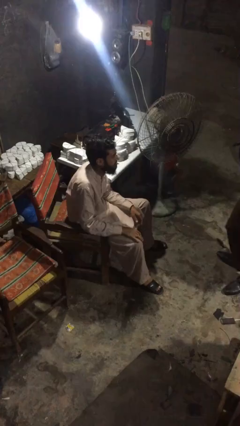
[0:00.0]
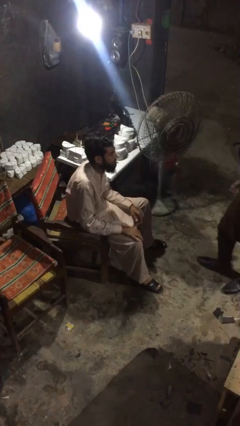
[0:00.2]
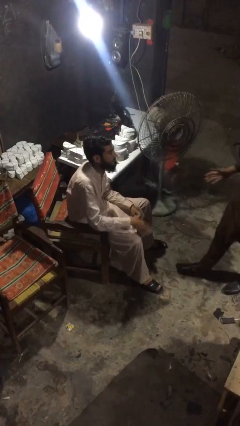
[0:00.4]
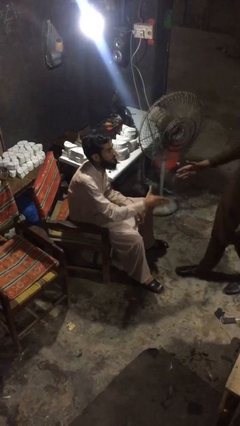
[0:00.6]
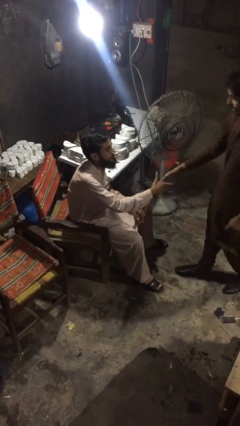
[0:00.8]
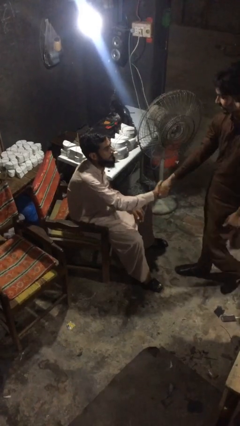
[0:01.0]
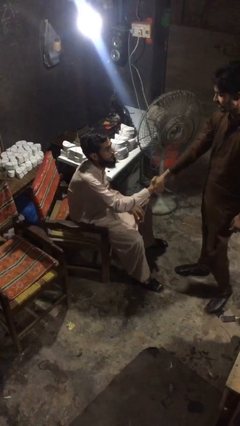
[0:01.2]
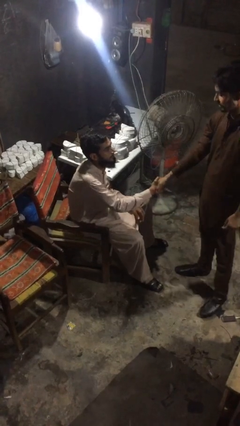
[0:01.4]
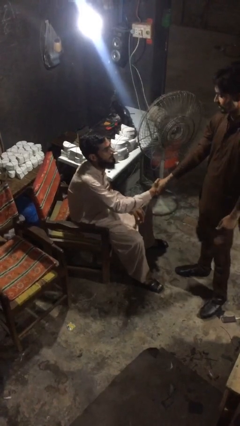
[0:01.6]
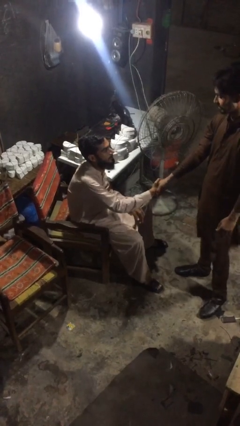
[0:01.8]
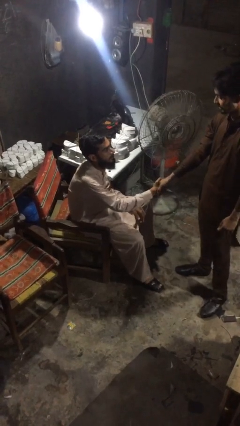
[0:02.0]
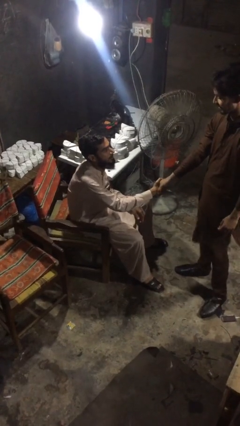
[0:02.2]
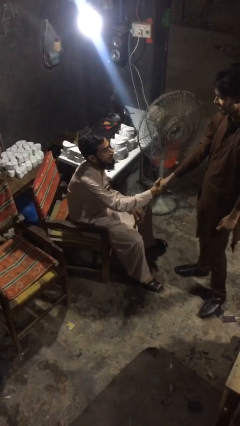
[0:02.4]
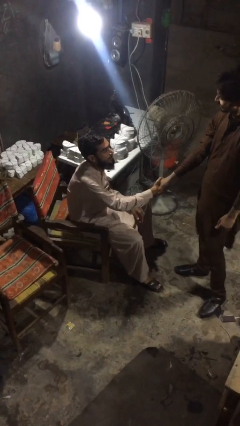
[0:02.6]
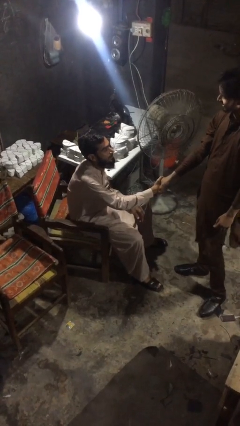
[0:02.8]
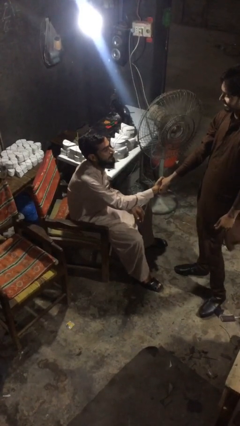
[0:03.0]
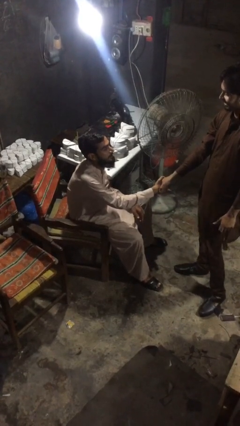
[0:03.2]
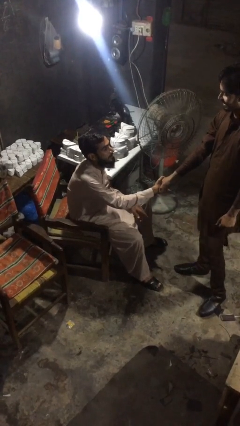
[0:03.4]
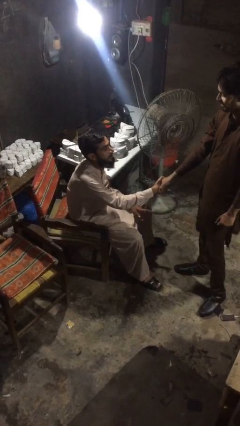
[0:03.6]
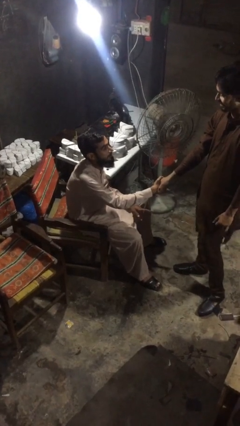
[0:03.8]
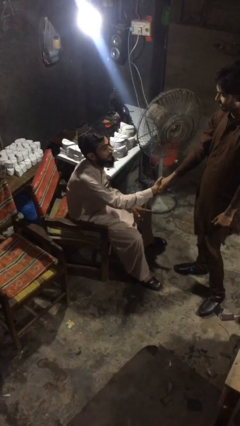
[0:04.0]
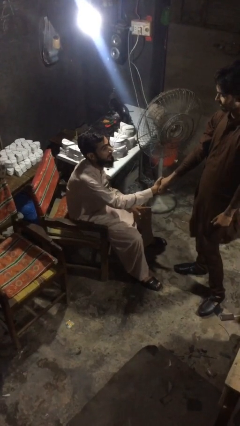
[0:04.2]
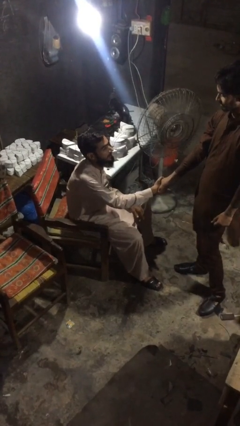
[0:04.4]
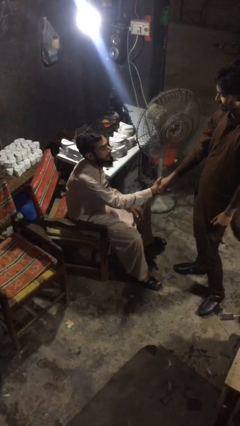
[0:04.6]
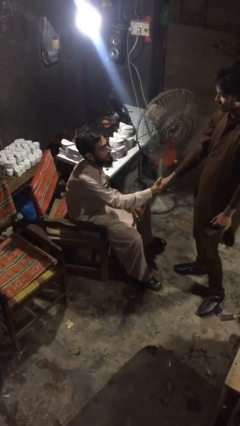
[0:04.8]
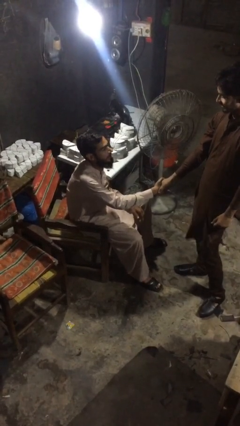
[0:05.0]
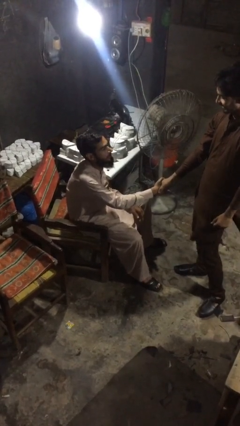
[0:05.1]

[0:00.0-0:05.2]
person shakes hand

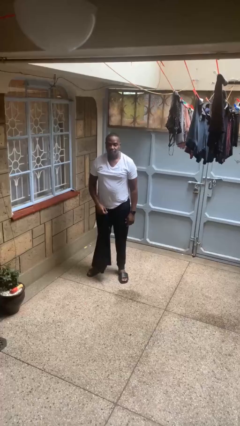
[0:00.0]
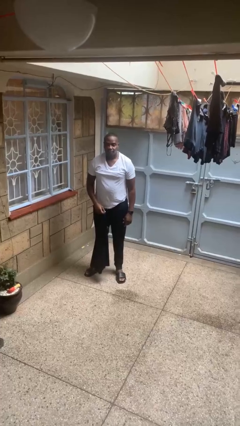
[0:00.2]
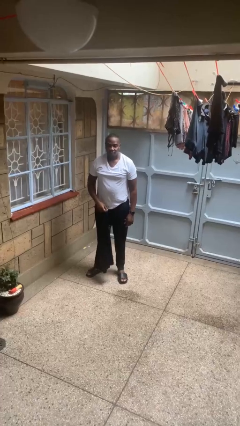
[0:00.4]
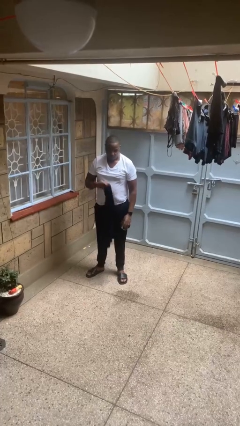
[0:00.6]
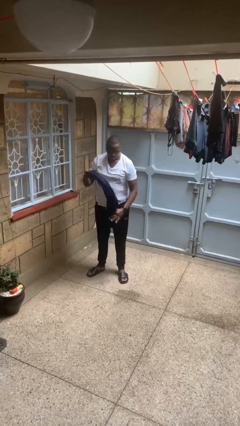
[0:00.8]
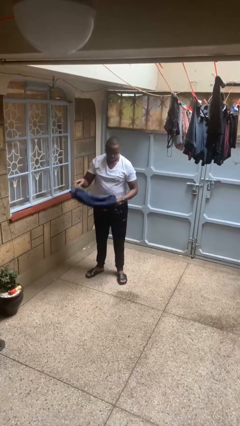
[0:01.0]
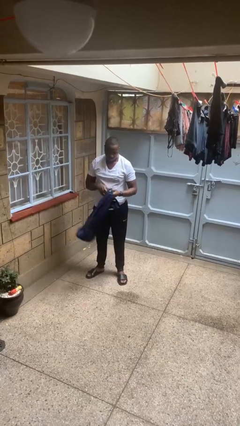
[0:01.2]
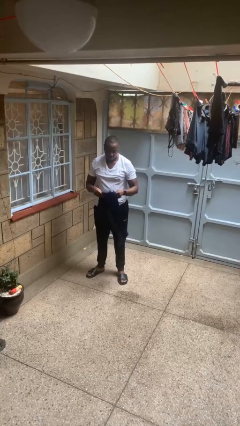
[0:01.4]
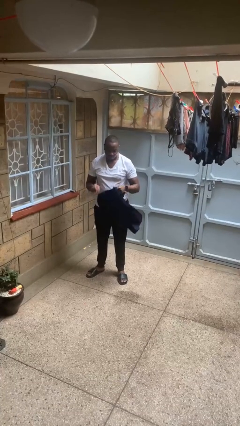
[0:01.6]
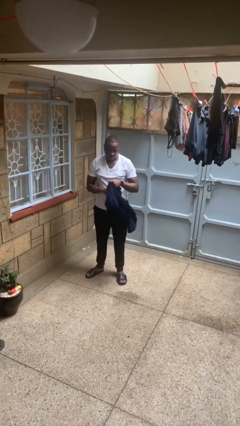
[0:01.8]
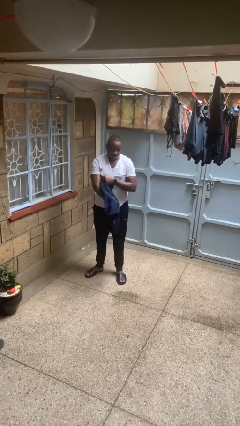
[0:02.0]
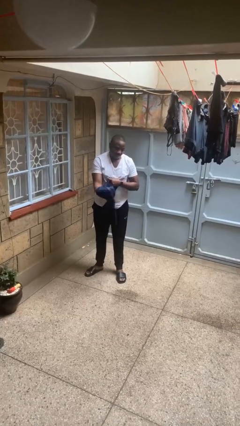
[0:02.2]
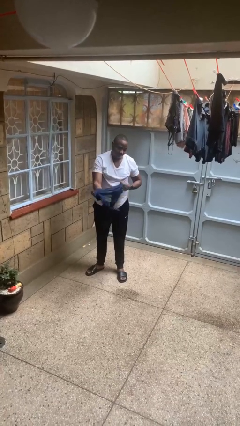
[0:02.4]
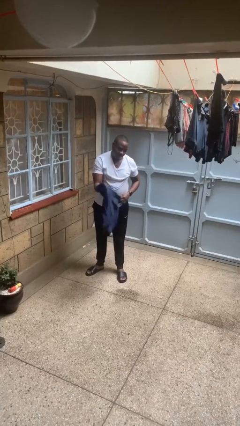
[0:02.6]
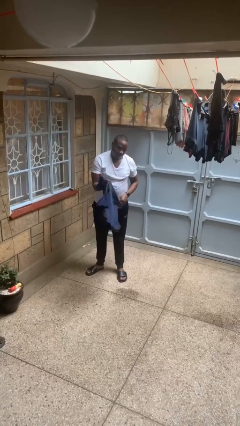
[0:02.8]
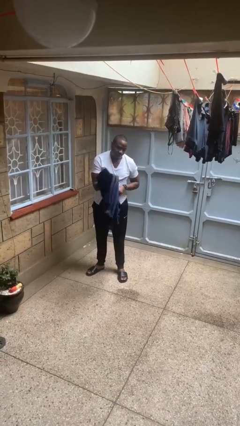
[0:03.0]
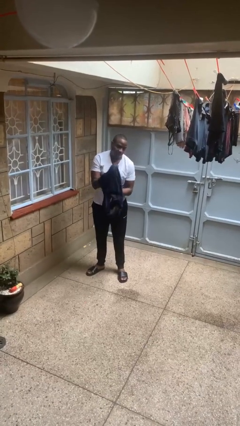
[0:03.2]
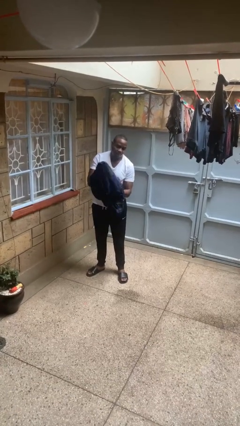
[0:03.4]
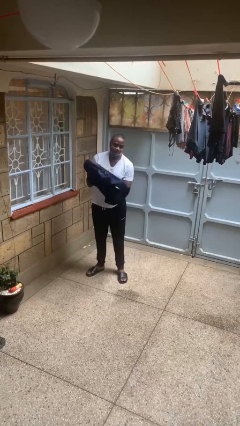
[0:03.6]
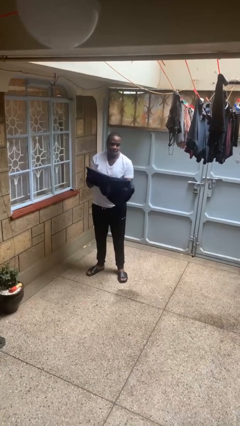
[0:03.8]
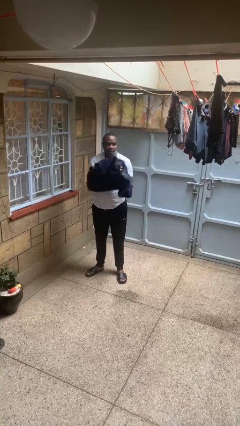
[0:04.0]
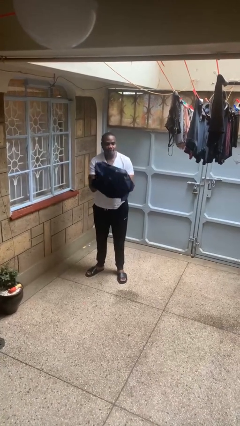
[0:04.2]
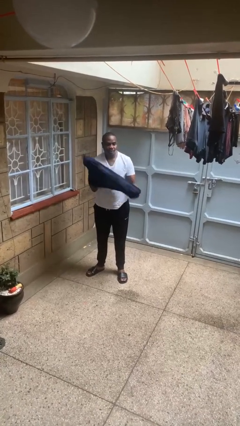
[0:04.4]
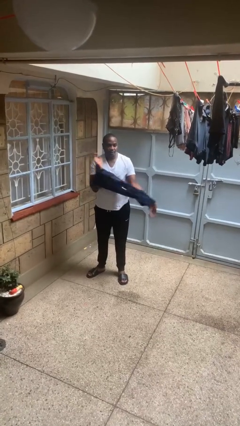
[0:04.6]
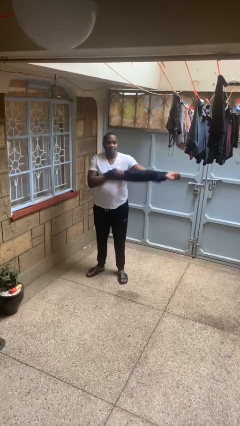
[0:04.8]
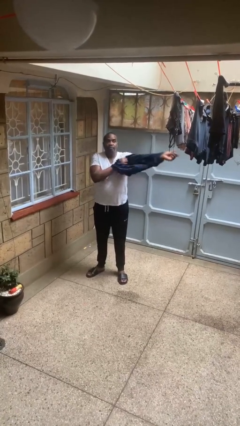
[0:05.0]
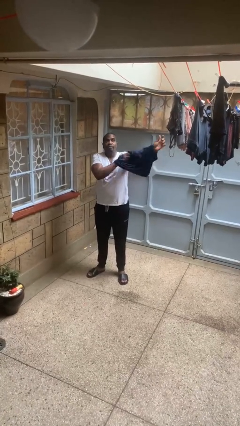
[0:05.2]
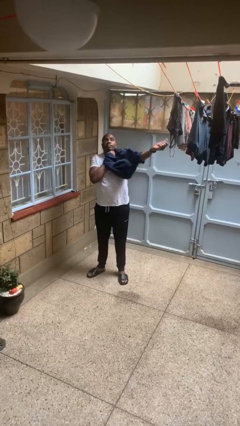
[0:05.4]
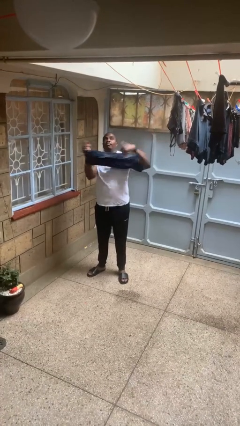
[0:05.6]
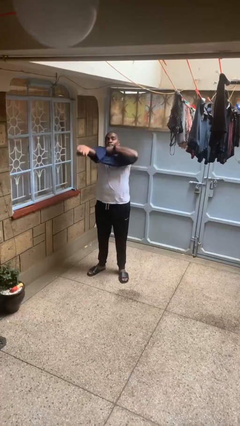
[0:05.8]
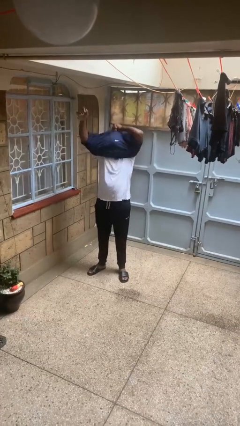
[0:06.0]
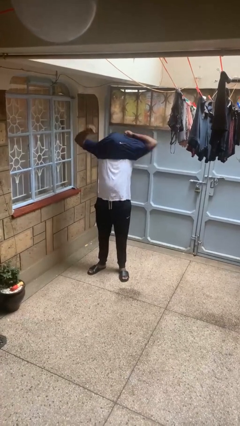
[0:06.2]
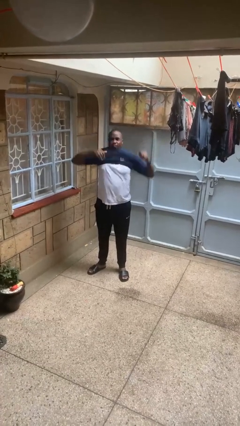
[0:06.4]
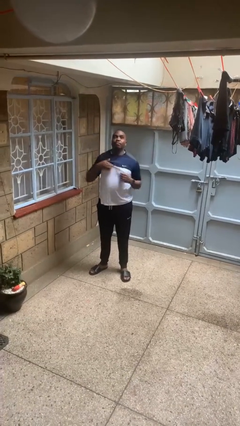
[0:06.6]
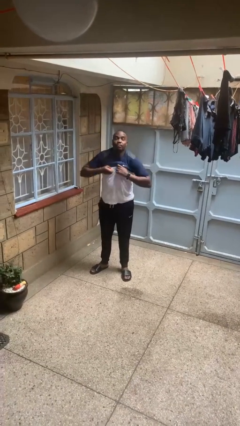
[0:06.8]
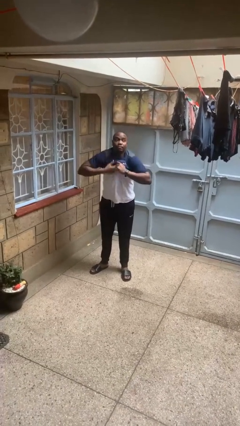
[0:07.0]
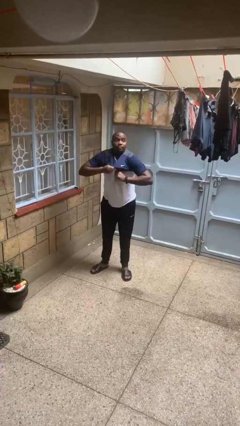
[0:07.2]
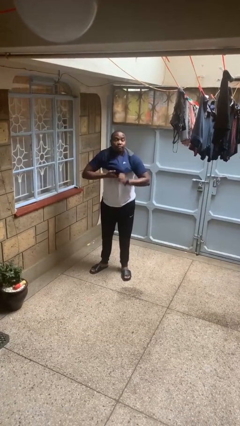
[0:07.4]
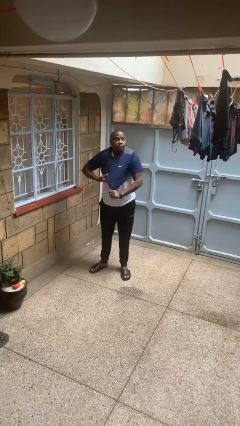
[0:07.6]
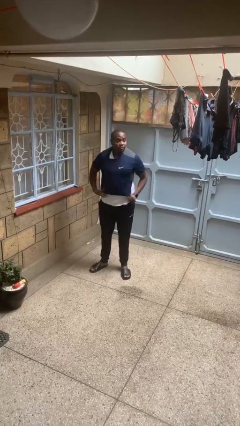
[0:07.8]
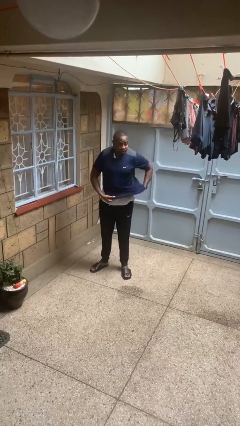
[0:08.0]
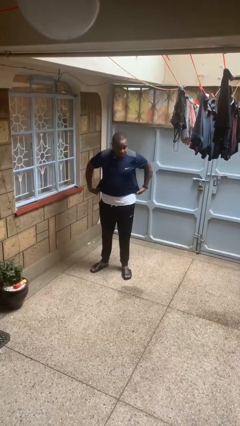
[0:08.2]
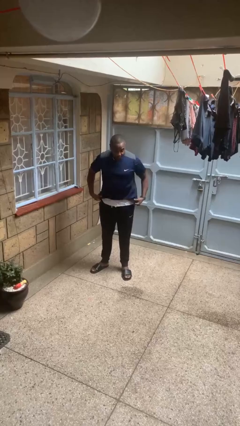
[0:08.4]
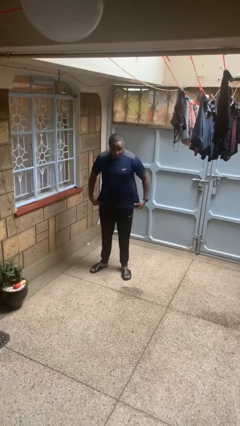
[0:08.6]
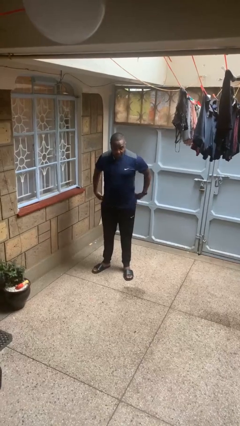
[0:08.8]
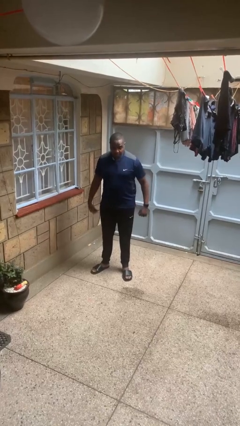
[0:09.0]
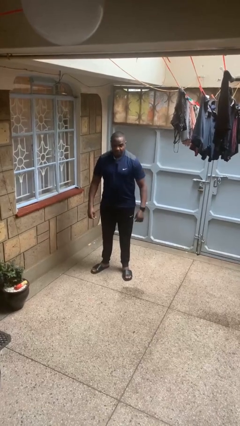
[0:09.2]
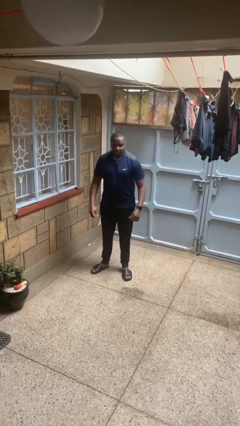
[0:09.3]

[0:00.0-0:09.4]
person puts on shirt

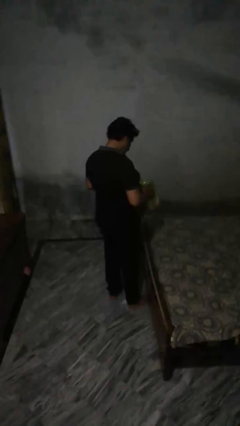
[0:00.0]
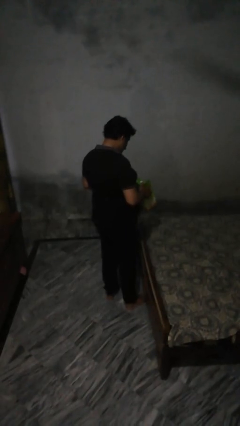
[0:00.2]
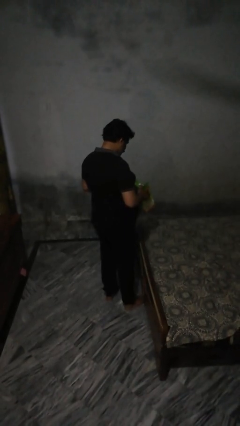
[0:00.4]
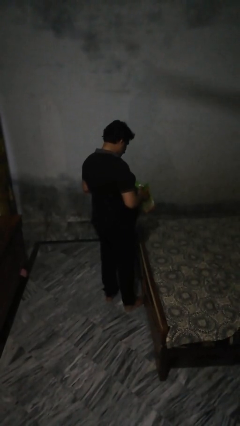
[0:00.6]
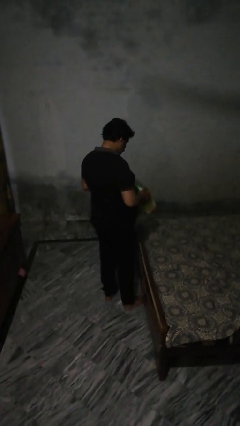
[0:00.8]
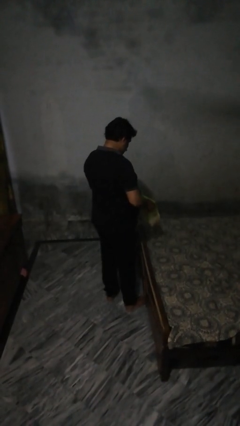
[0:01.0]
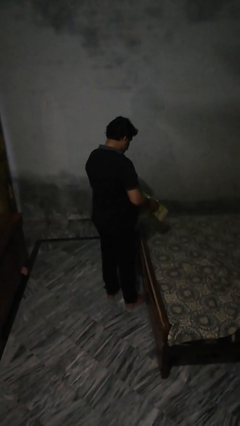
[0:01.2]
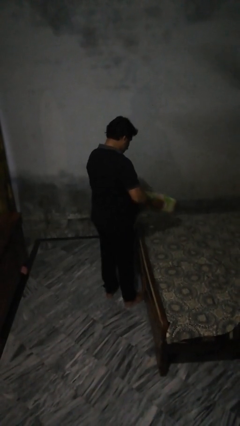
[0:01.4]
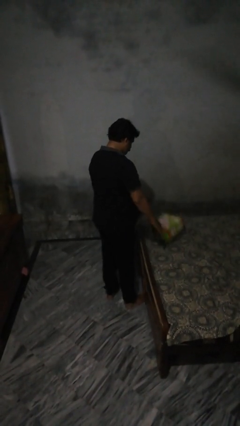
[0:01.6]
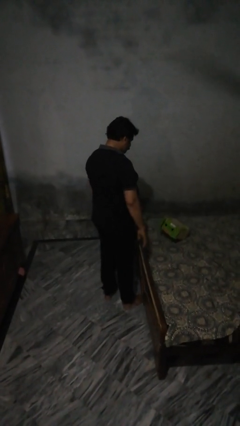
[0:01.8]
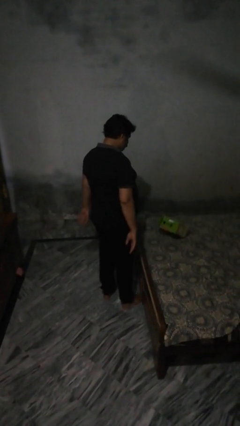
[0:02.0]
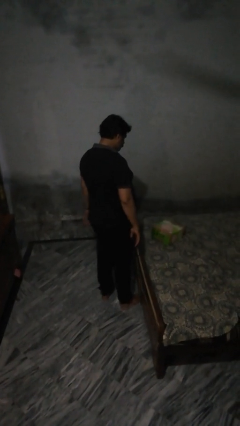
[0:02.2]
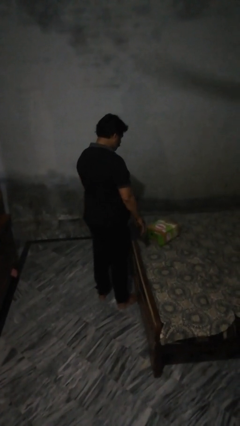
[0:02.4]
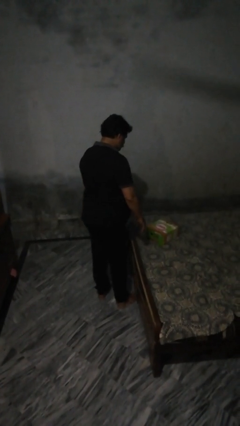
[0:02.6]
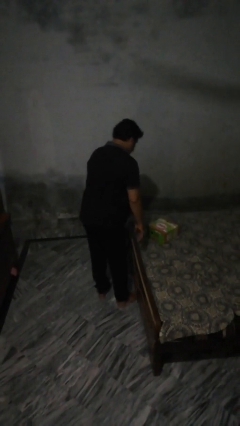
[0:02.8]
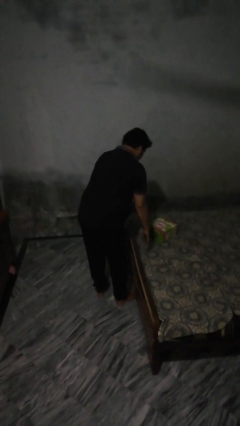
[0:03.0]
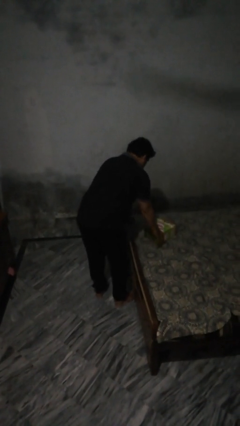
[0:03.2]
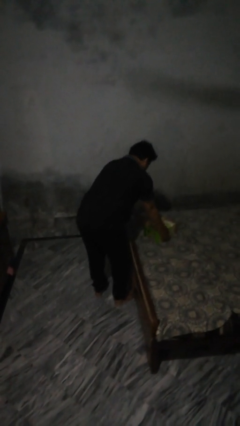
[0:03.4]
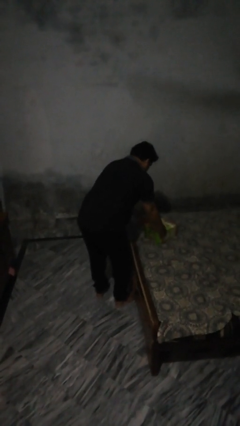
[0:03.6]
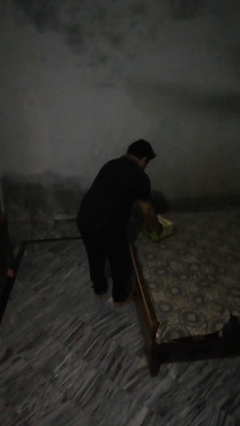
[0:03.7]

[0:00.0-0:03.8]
person throws object on bed
